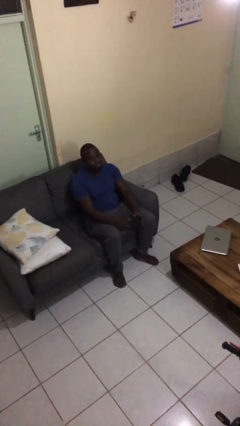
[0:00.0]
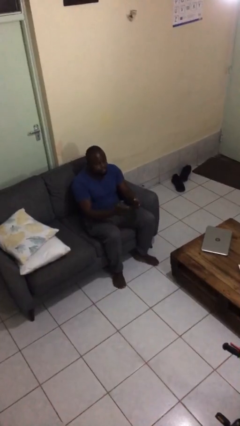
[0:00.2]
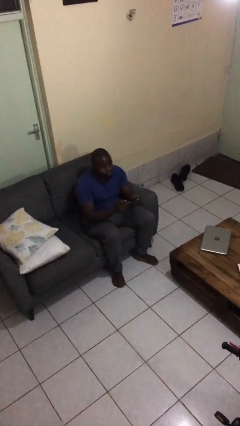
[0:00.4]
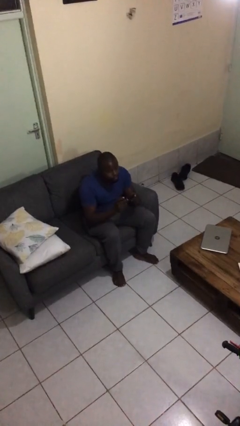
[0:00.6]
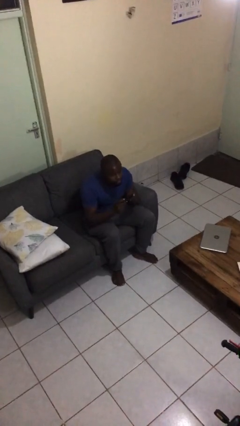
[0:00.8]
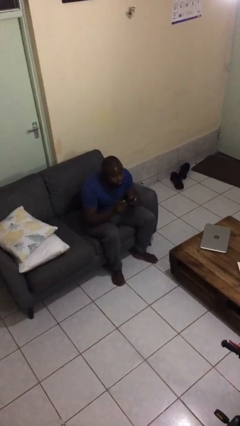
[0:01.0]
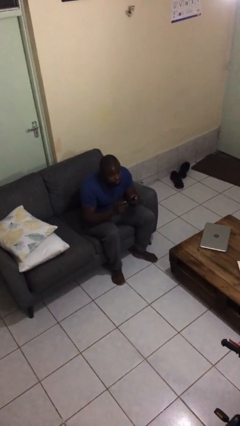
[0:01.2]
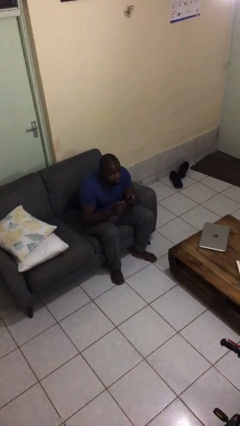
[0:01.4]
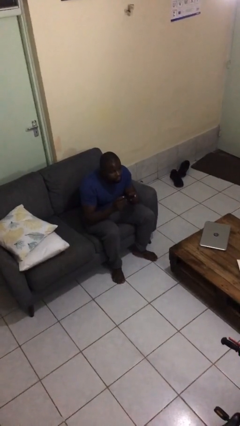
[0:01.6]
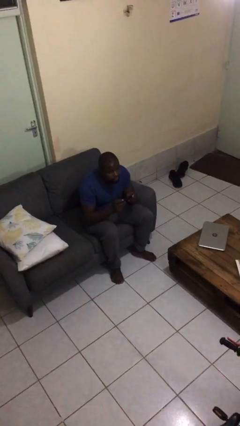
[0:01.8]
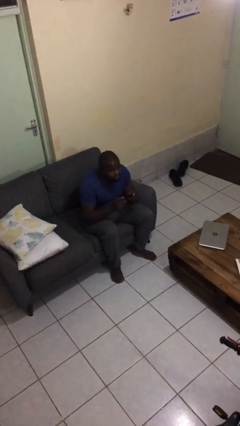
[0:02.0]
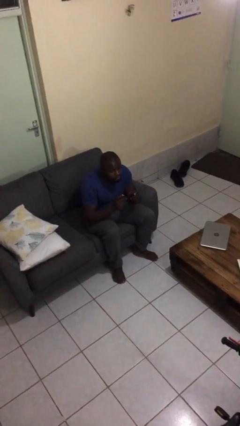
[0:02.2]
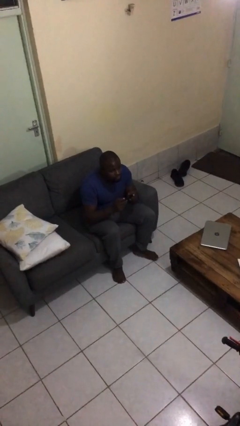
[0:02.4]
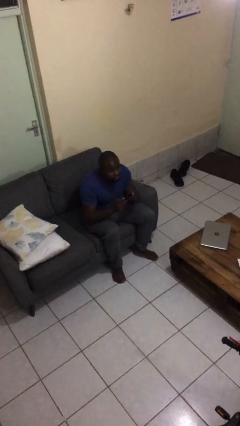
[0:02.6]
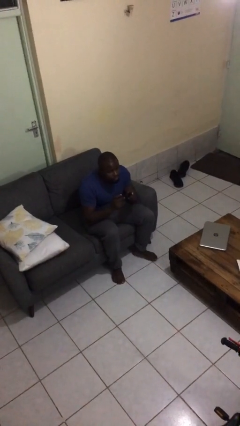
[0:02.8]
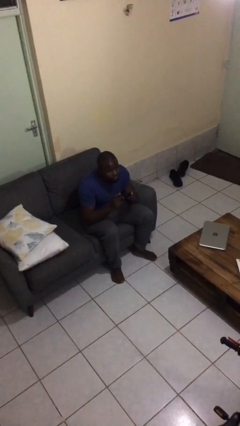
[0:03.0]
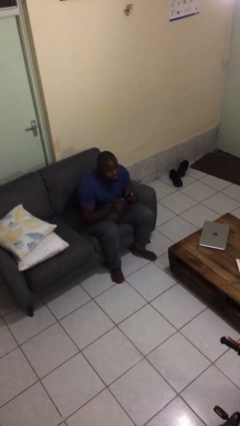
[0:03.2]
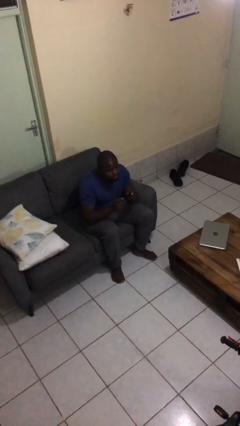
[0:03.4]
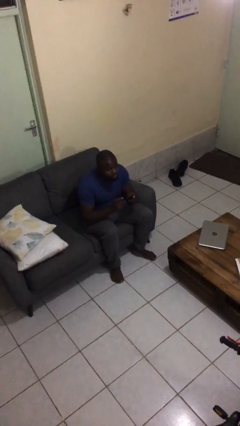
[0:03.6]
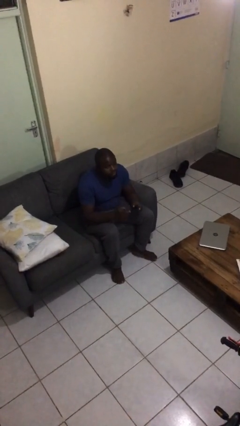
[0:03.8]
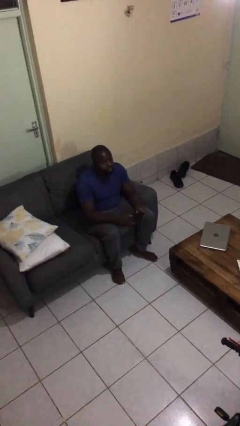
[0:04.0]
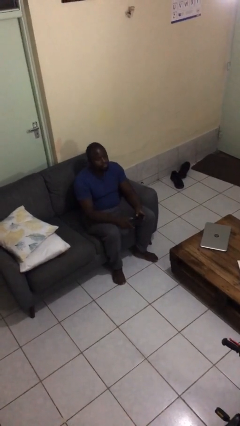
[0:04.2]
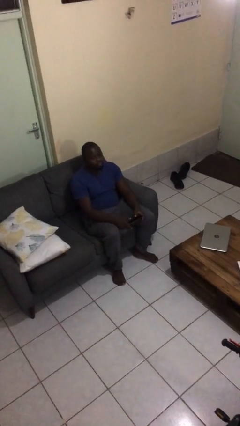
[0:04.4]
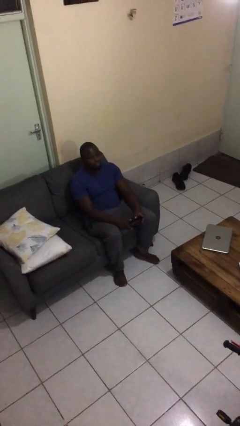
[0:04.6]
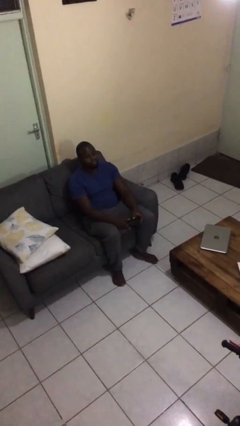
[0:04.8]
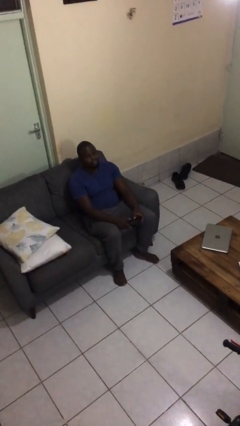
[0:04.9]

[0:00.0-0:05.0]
person interacts with handheld game

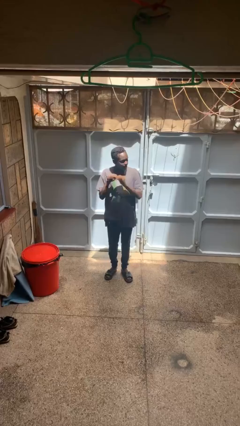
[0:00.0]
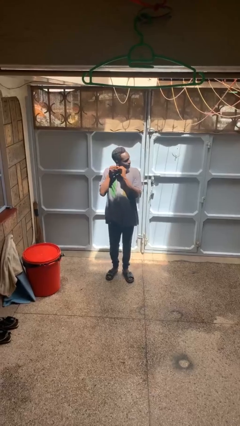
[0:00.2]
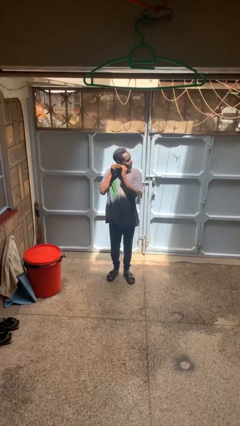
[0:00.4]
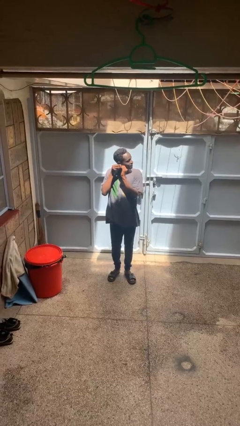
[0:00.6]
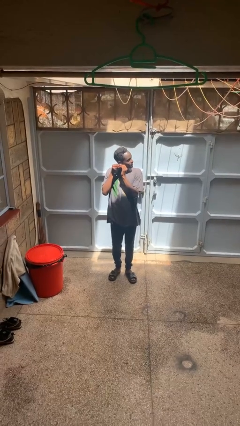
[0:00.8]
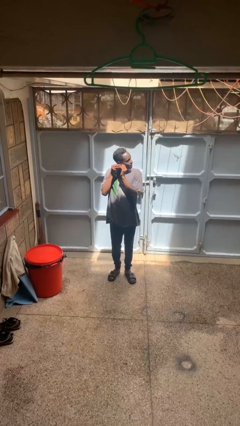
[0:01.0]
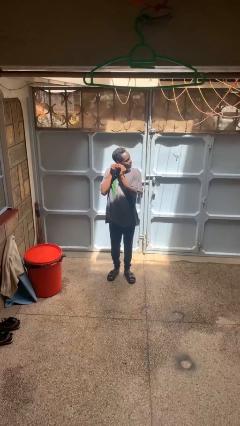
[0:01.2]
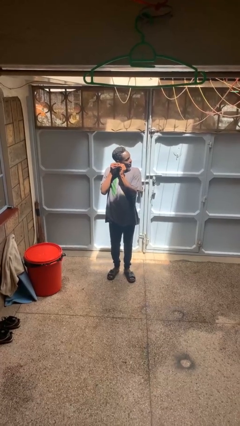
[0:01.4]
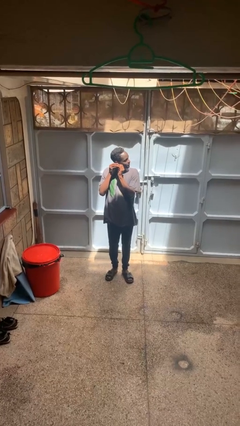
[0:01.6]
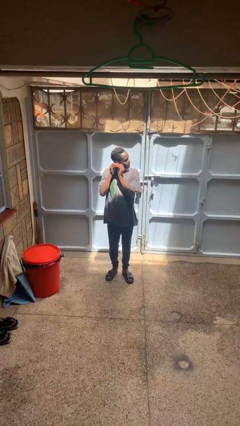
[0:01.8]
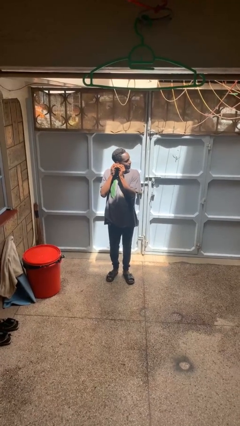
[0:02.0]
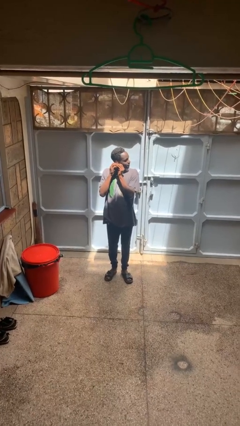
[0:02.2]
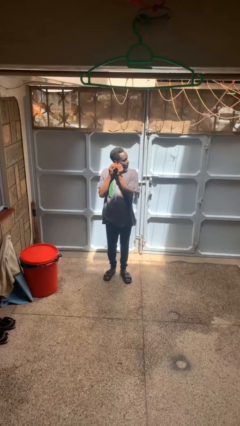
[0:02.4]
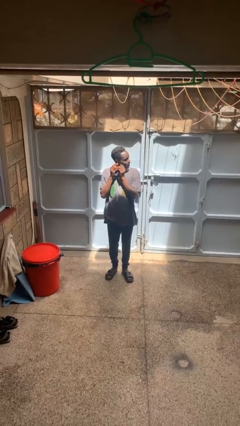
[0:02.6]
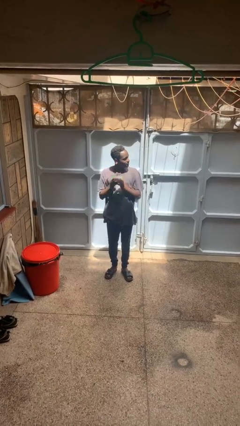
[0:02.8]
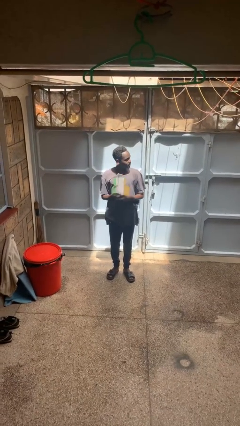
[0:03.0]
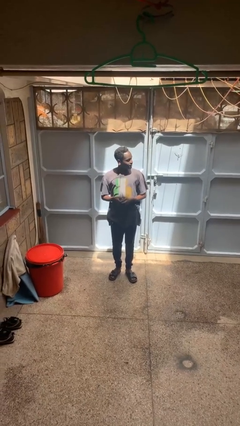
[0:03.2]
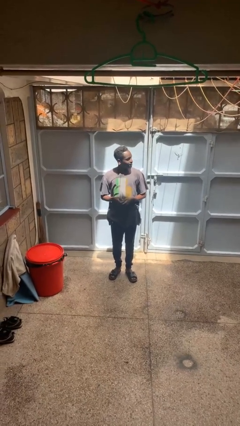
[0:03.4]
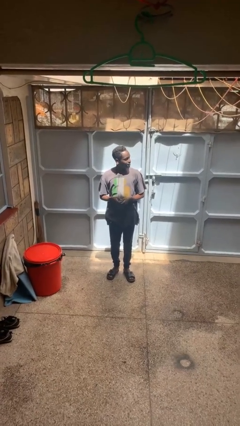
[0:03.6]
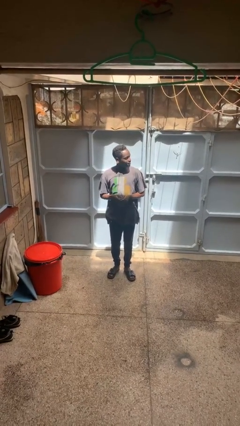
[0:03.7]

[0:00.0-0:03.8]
person puts on earrings

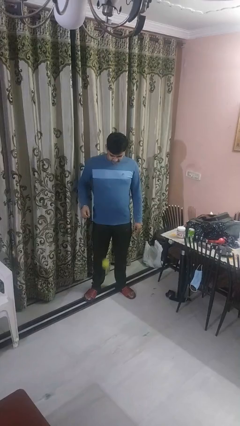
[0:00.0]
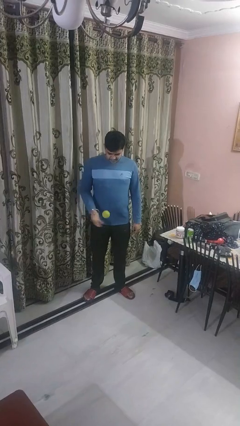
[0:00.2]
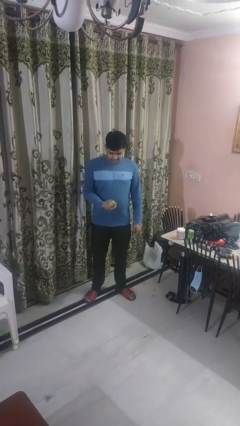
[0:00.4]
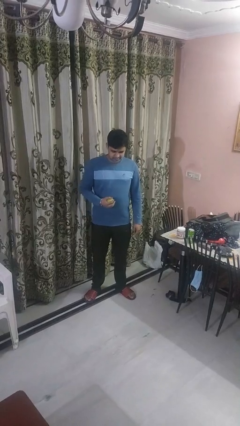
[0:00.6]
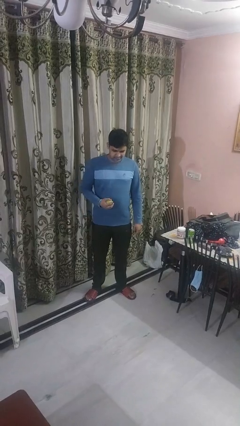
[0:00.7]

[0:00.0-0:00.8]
person bounces ball on floor

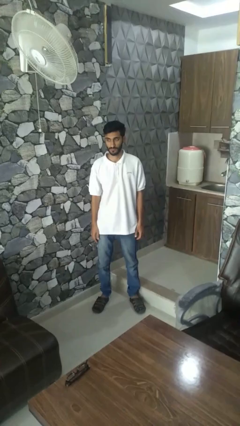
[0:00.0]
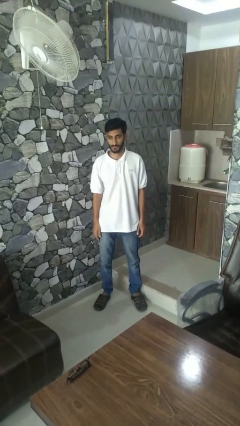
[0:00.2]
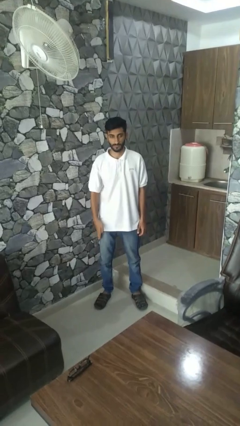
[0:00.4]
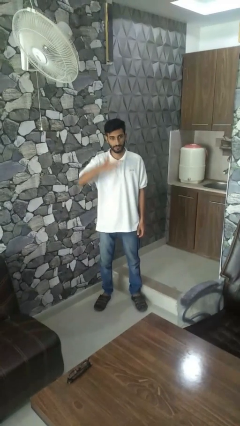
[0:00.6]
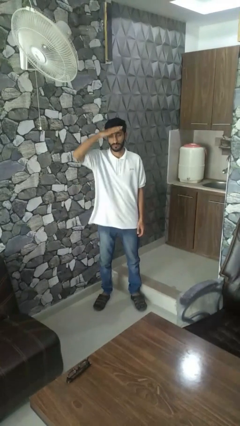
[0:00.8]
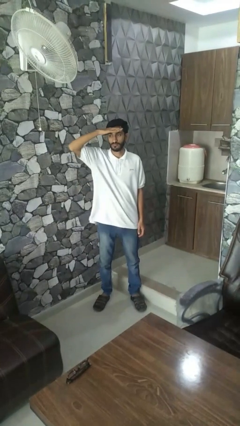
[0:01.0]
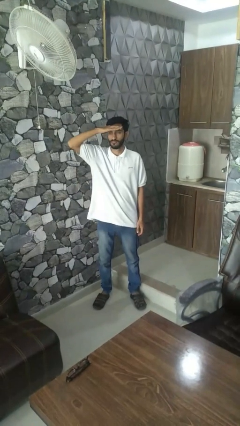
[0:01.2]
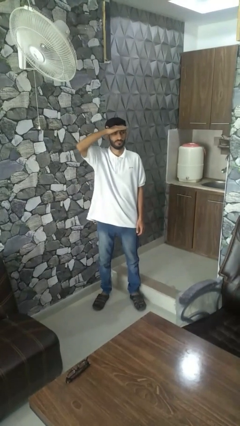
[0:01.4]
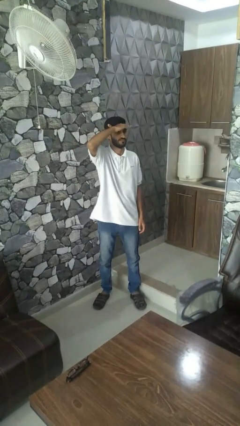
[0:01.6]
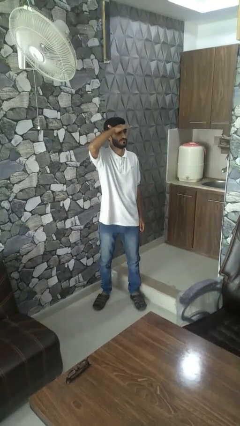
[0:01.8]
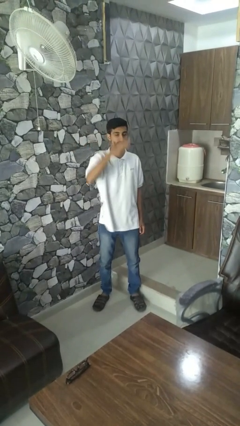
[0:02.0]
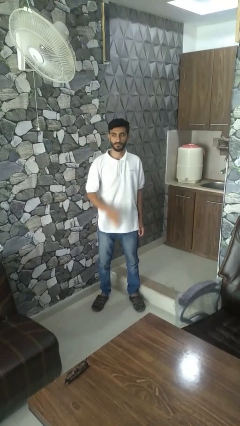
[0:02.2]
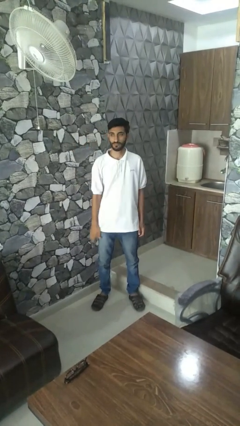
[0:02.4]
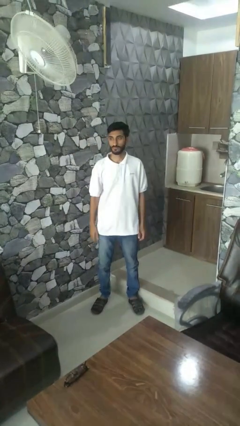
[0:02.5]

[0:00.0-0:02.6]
person shades eyes

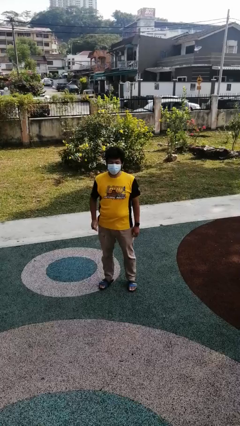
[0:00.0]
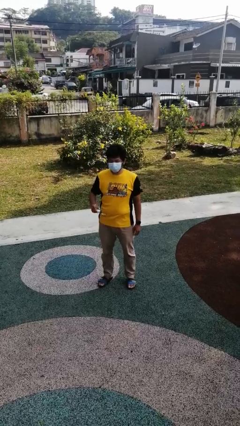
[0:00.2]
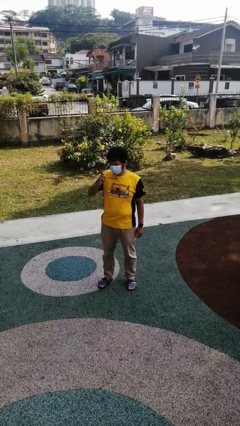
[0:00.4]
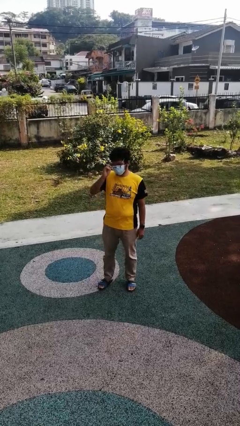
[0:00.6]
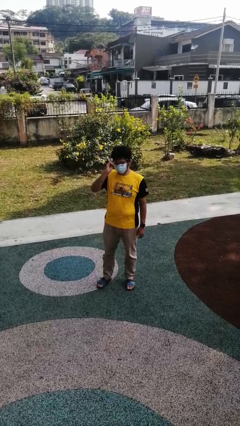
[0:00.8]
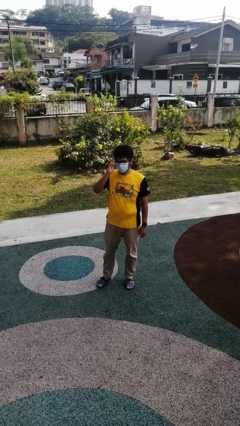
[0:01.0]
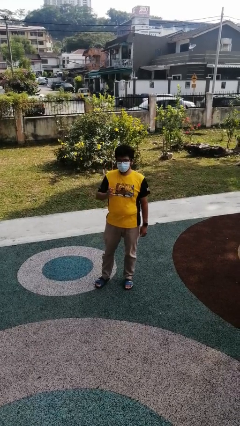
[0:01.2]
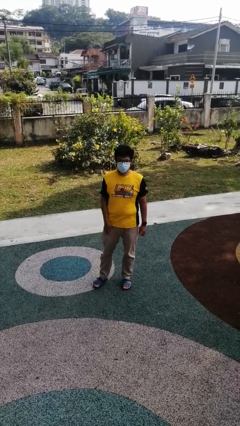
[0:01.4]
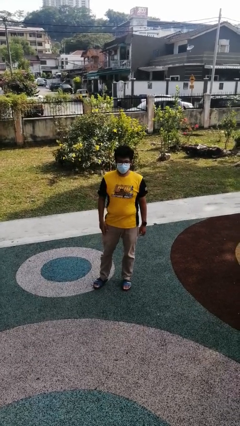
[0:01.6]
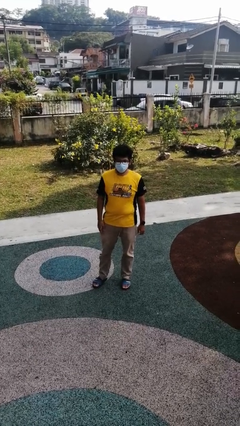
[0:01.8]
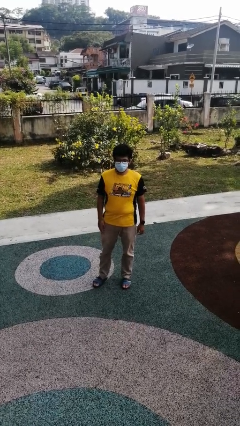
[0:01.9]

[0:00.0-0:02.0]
person puts on glasses

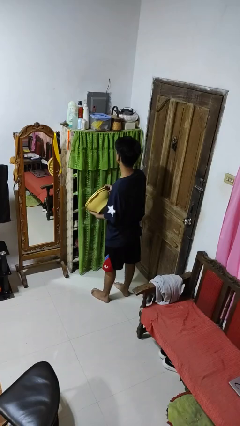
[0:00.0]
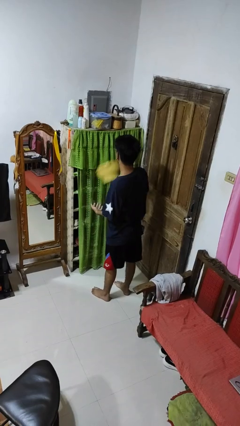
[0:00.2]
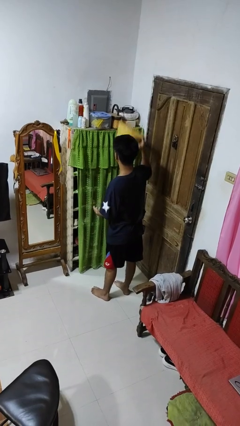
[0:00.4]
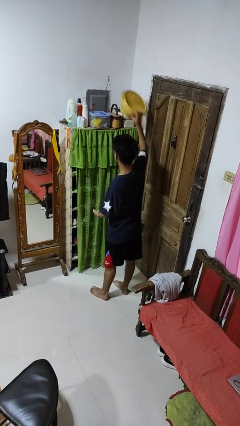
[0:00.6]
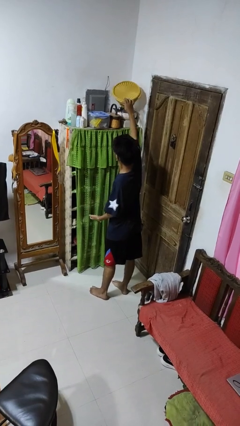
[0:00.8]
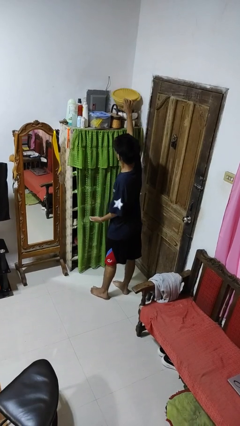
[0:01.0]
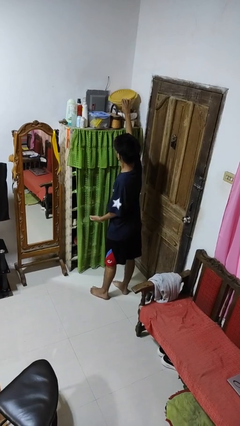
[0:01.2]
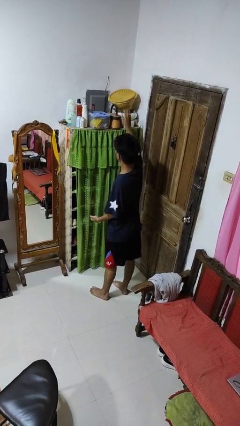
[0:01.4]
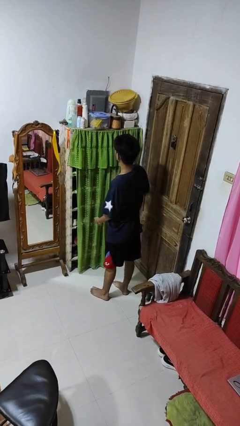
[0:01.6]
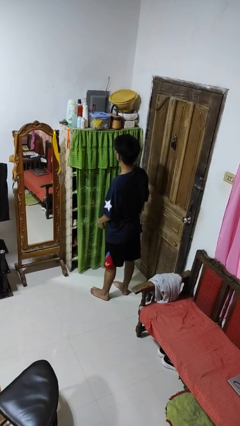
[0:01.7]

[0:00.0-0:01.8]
person puts down object on shelf

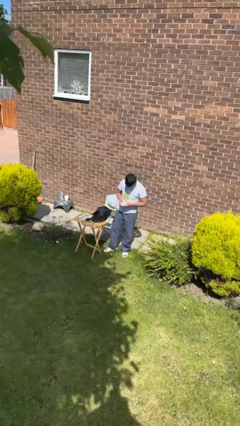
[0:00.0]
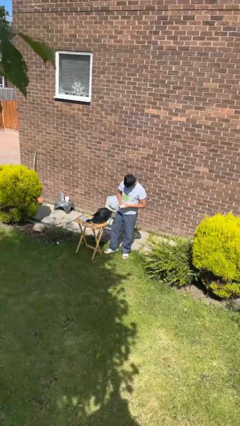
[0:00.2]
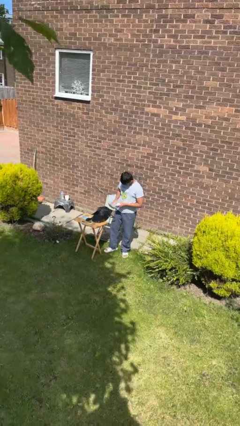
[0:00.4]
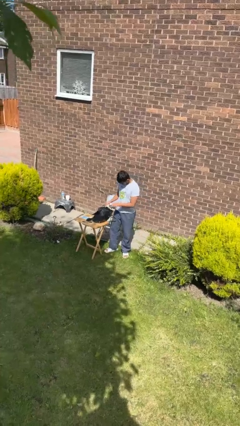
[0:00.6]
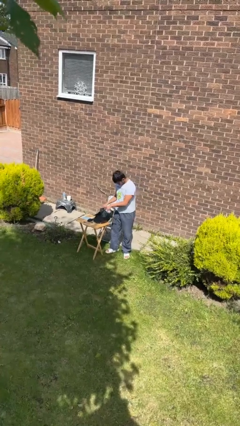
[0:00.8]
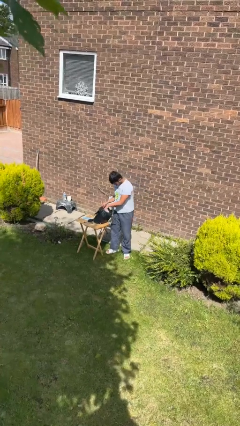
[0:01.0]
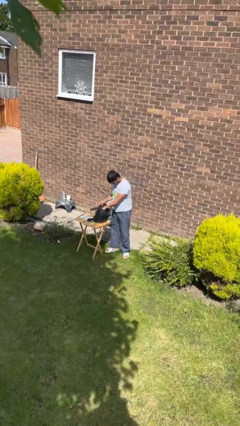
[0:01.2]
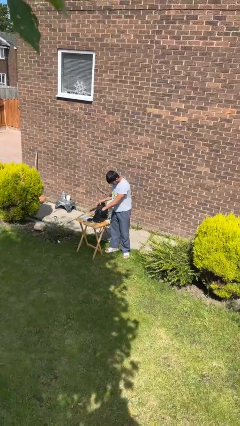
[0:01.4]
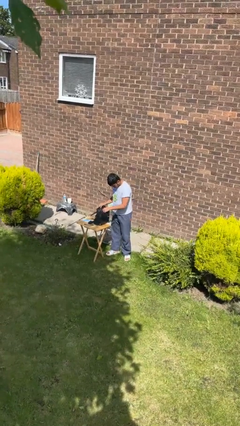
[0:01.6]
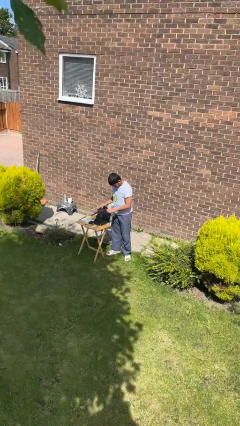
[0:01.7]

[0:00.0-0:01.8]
person puts object into backpack
